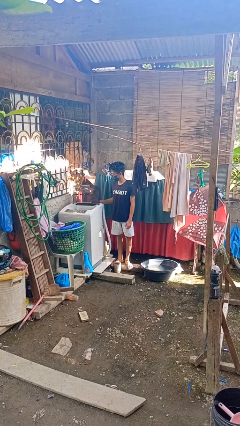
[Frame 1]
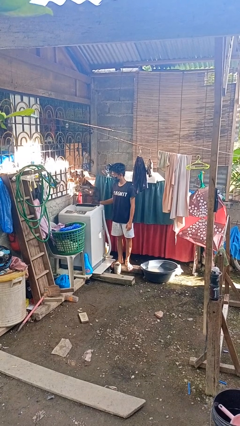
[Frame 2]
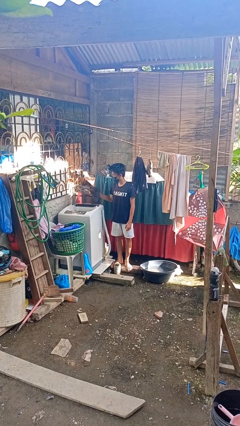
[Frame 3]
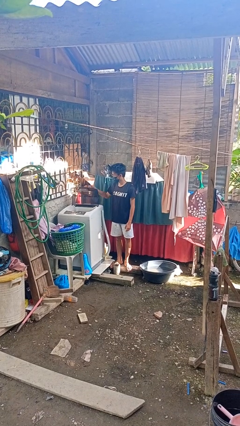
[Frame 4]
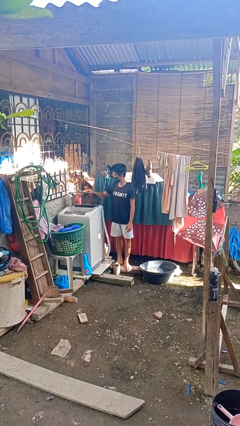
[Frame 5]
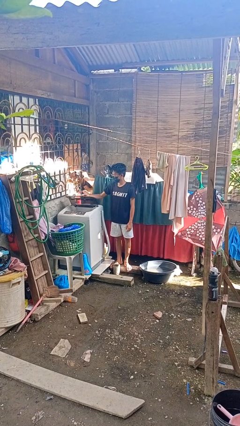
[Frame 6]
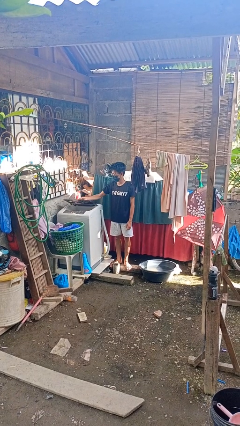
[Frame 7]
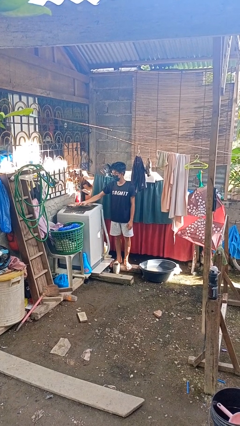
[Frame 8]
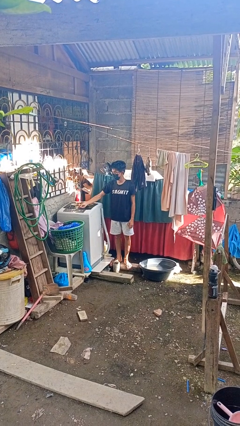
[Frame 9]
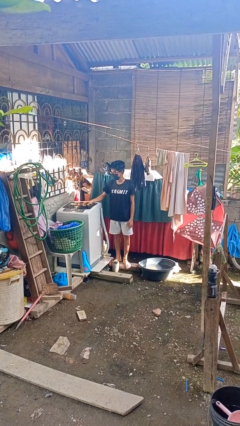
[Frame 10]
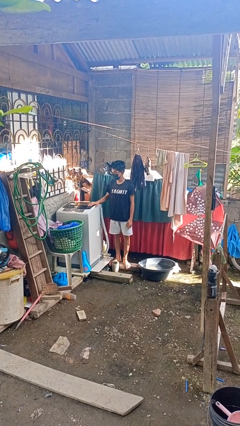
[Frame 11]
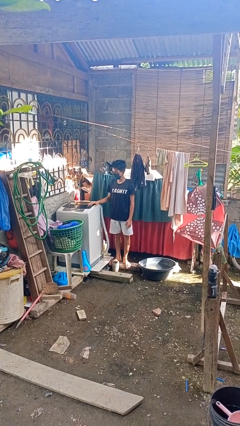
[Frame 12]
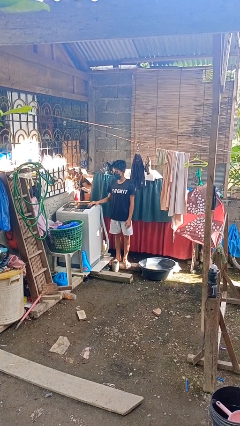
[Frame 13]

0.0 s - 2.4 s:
person closes clothes washer

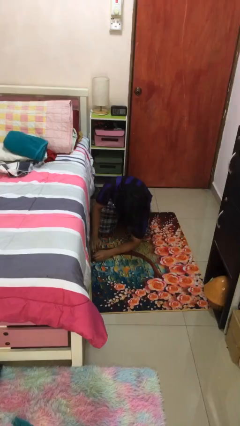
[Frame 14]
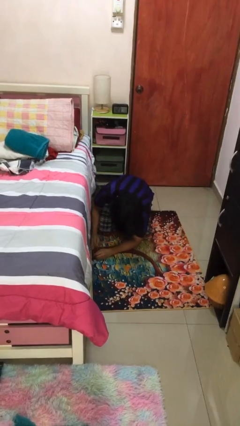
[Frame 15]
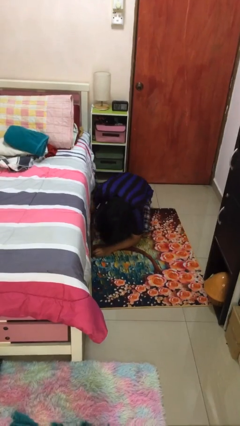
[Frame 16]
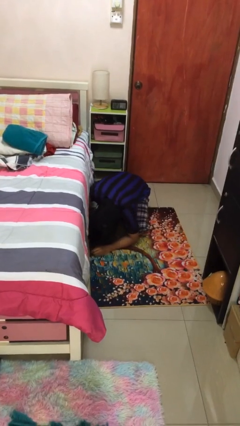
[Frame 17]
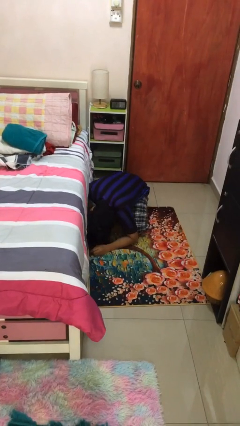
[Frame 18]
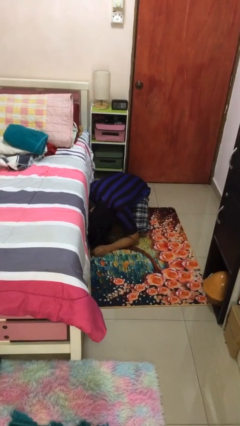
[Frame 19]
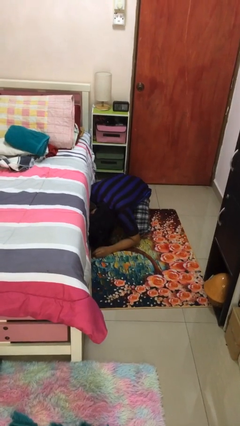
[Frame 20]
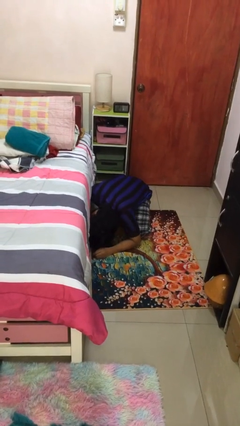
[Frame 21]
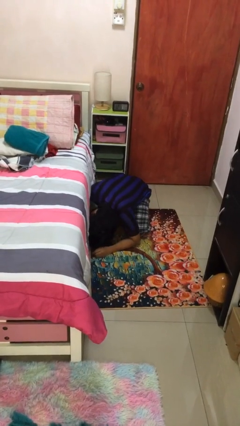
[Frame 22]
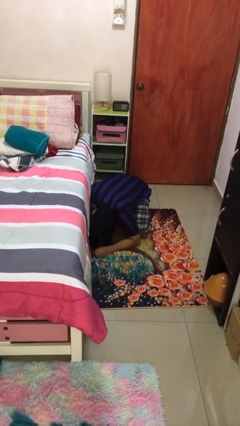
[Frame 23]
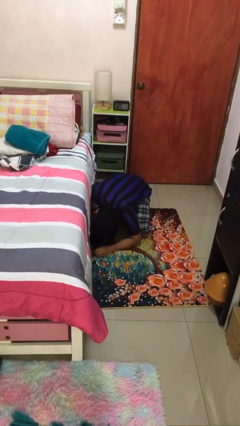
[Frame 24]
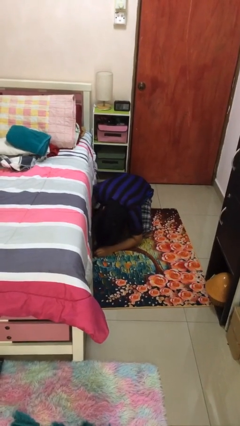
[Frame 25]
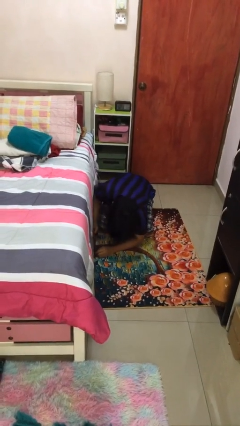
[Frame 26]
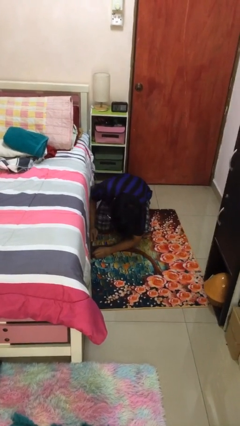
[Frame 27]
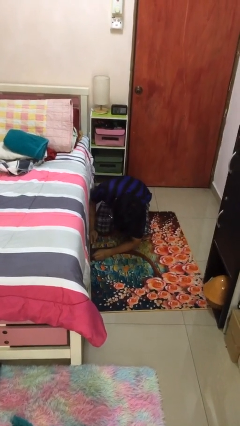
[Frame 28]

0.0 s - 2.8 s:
person searches under bed

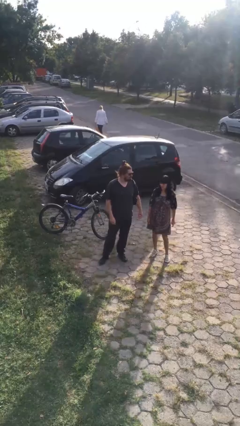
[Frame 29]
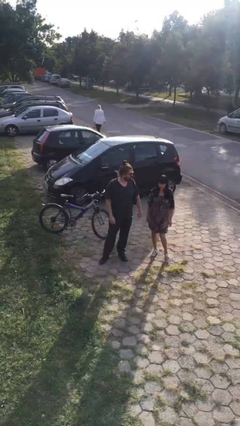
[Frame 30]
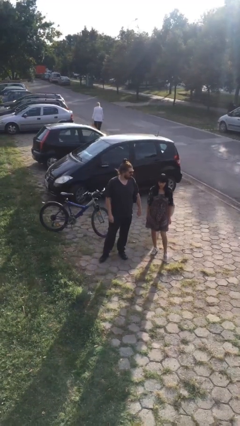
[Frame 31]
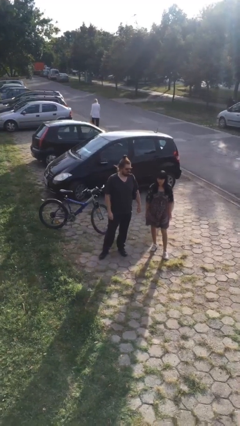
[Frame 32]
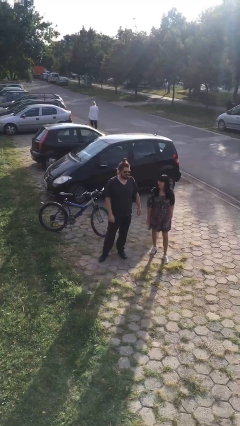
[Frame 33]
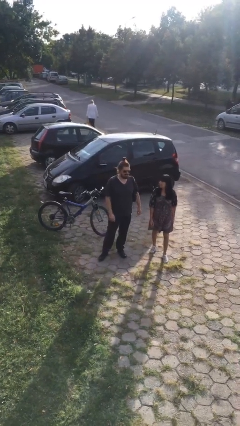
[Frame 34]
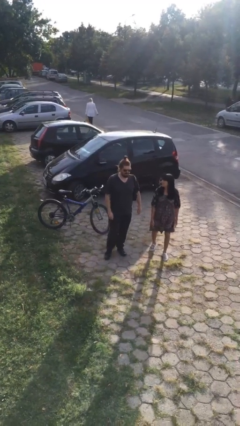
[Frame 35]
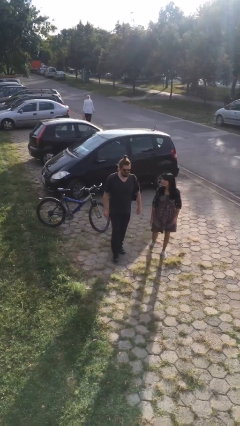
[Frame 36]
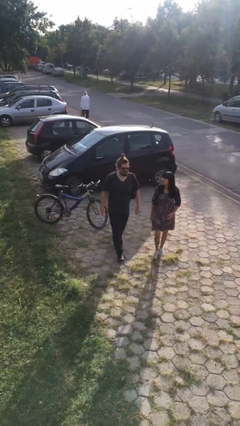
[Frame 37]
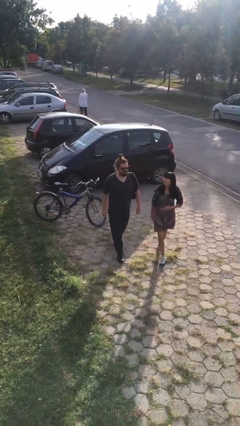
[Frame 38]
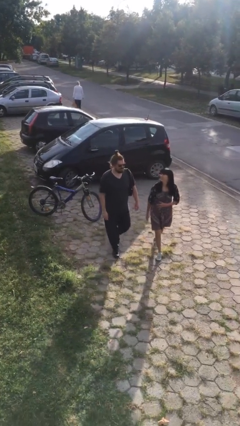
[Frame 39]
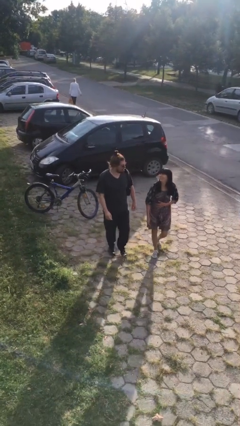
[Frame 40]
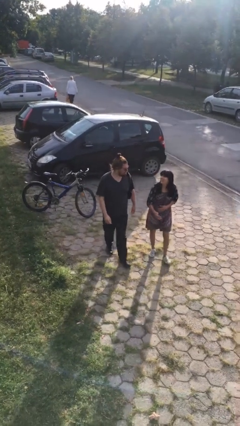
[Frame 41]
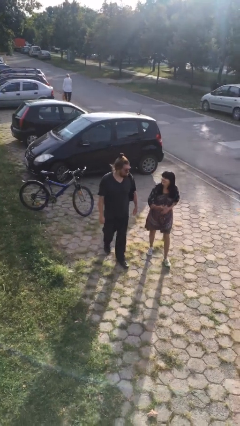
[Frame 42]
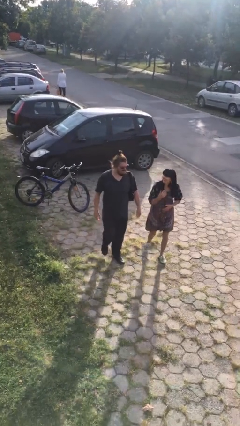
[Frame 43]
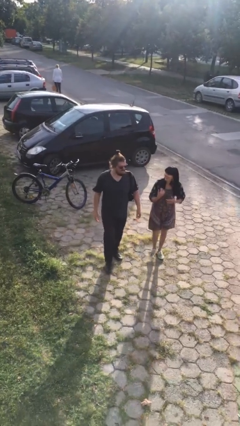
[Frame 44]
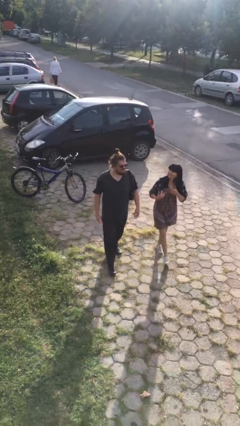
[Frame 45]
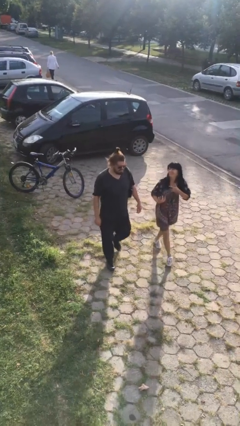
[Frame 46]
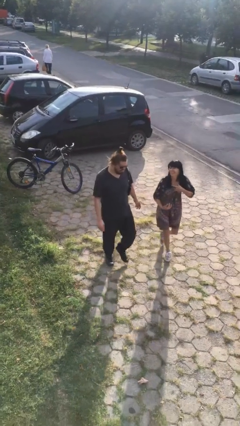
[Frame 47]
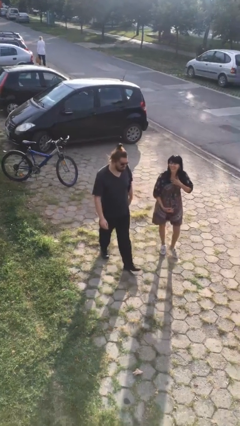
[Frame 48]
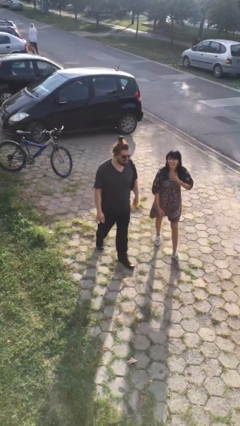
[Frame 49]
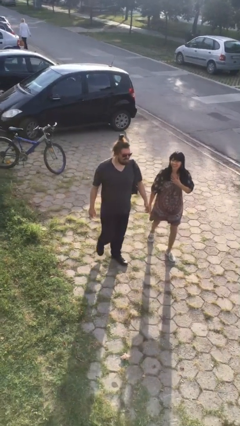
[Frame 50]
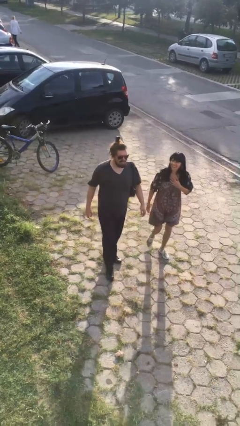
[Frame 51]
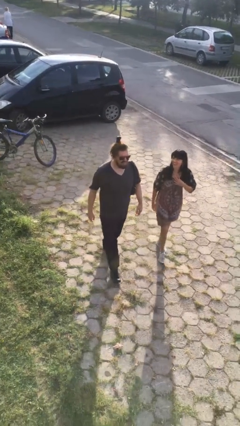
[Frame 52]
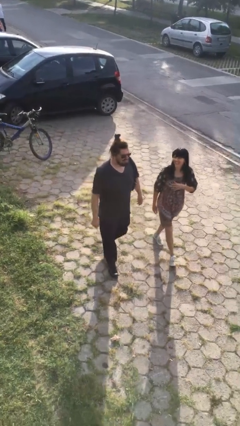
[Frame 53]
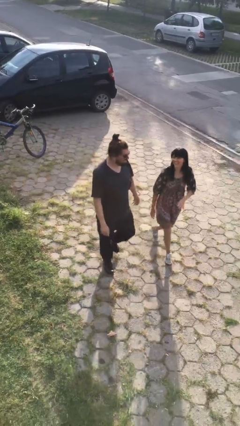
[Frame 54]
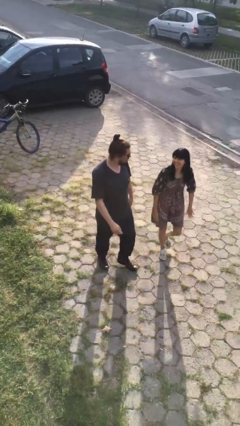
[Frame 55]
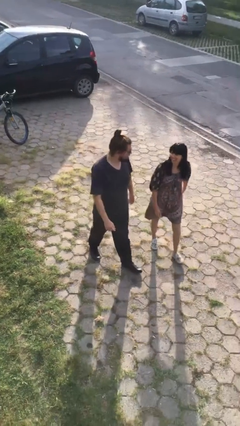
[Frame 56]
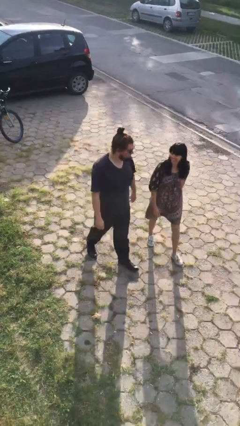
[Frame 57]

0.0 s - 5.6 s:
person talks to person

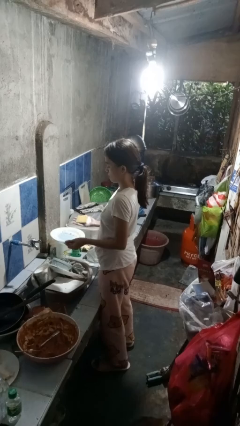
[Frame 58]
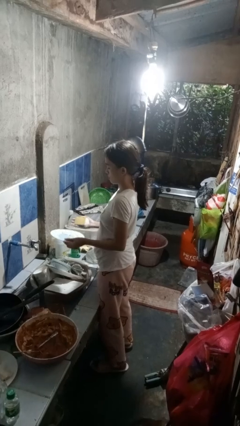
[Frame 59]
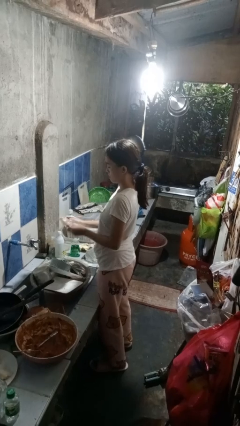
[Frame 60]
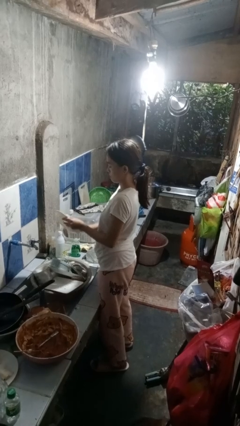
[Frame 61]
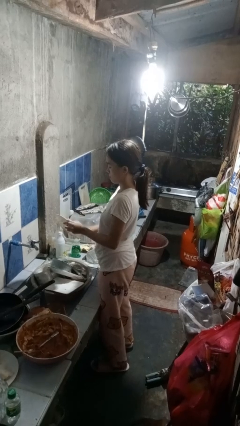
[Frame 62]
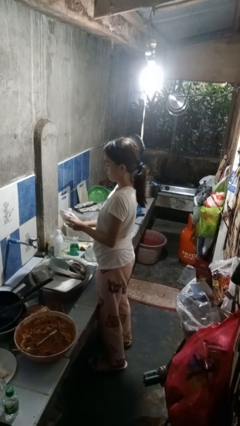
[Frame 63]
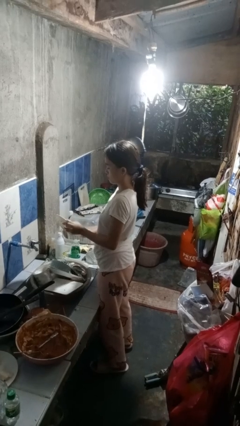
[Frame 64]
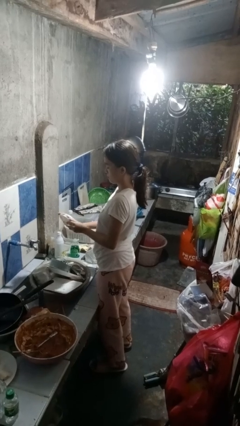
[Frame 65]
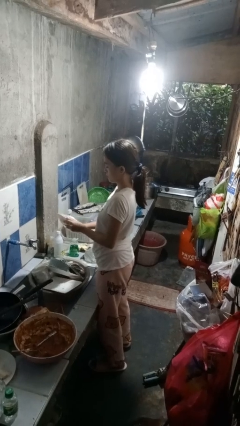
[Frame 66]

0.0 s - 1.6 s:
person washes dish

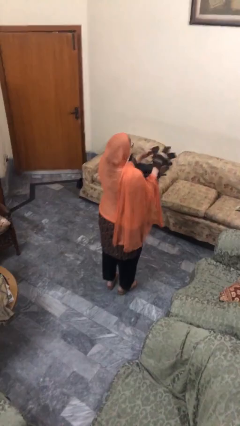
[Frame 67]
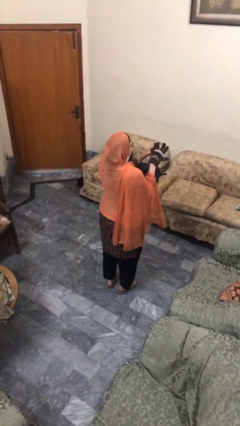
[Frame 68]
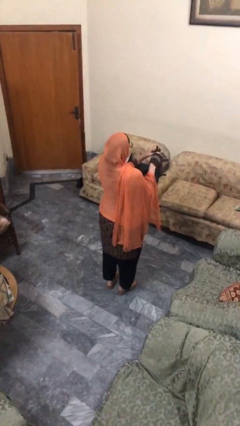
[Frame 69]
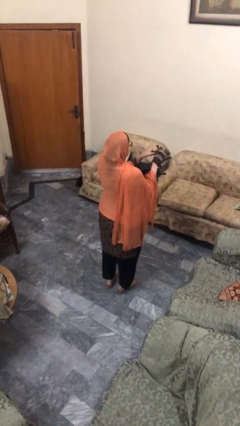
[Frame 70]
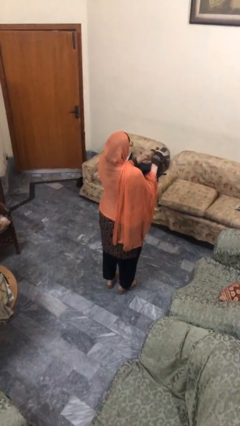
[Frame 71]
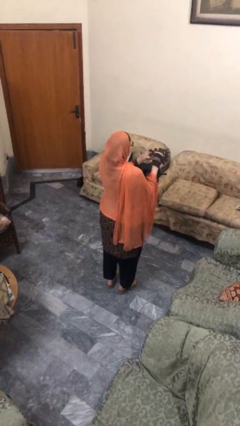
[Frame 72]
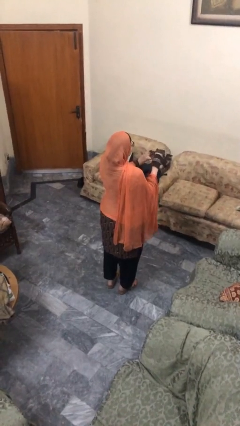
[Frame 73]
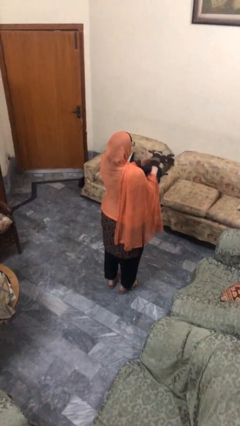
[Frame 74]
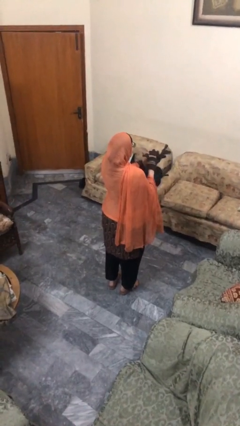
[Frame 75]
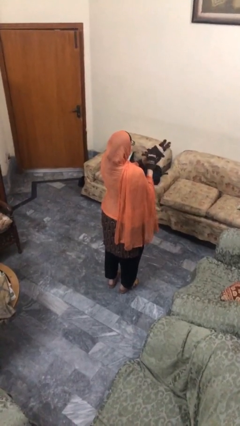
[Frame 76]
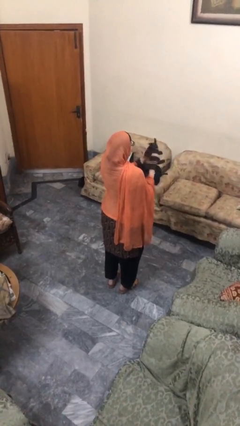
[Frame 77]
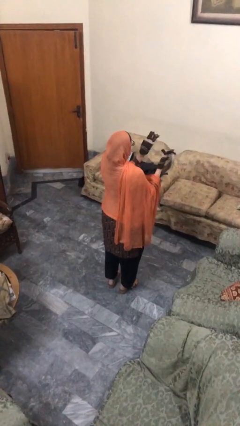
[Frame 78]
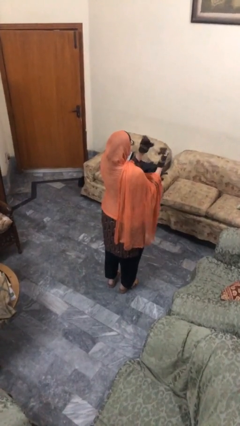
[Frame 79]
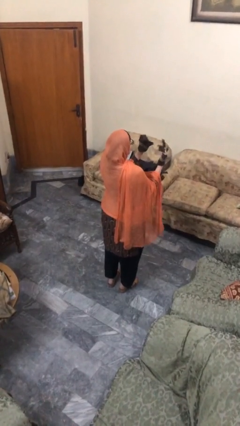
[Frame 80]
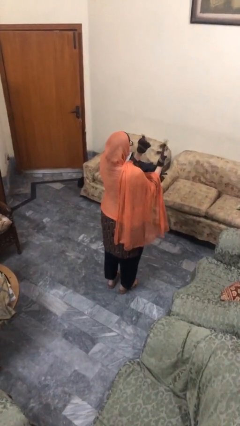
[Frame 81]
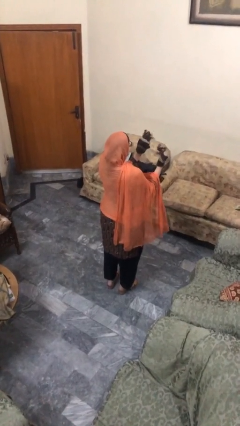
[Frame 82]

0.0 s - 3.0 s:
person puts on gloves

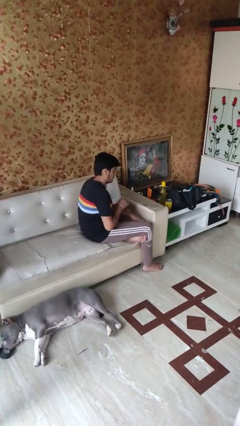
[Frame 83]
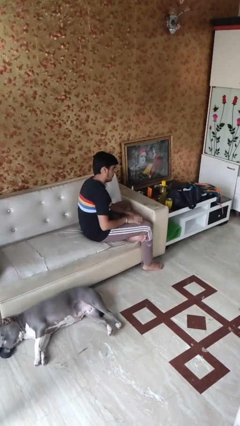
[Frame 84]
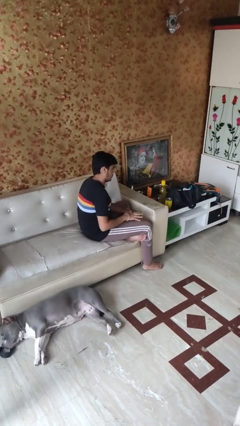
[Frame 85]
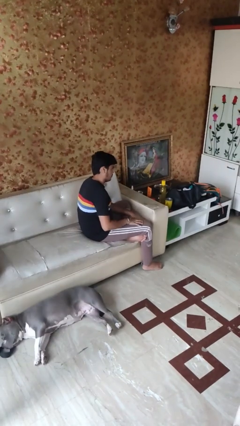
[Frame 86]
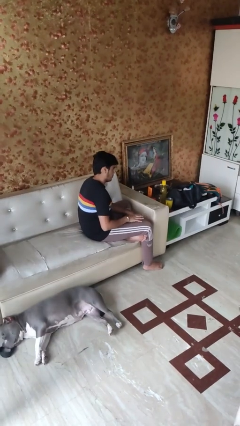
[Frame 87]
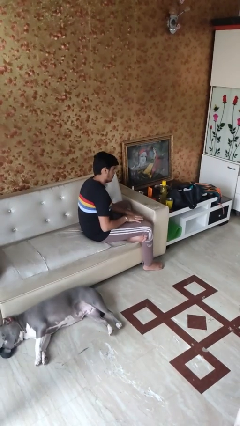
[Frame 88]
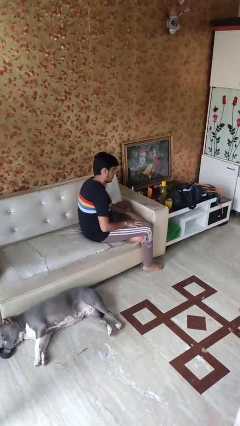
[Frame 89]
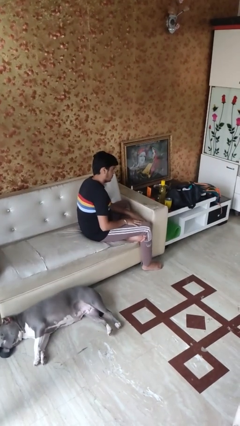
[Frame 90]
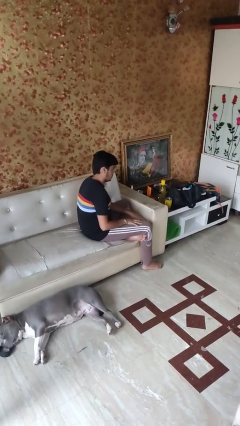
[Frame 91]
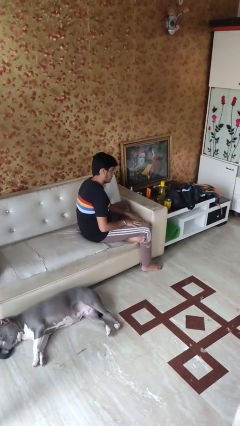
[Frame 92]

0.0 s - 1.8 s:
person slaps hands on thighs

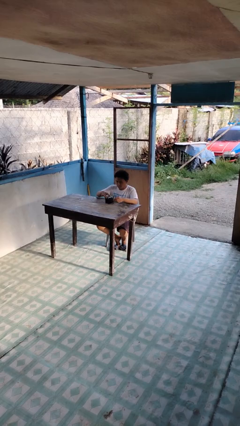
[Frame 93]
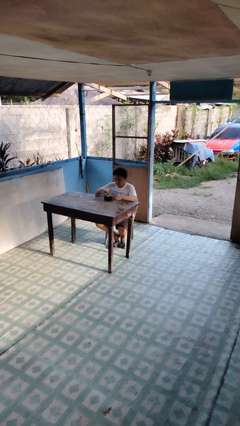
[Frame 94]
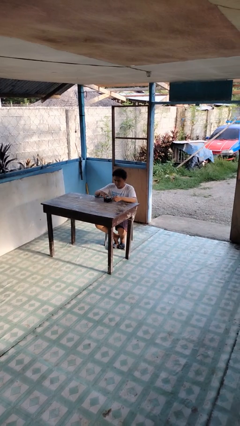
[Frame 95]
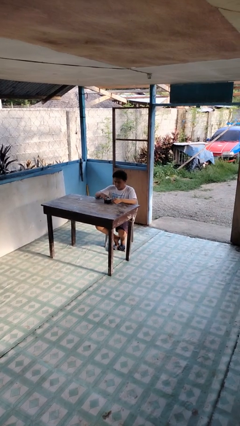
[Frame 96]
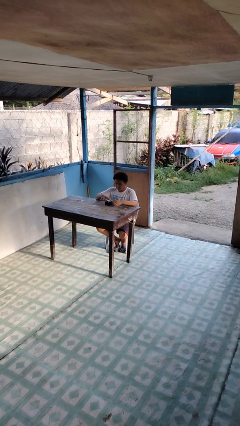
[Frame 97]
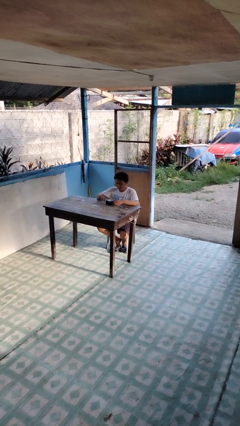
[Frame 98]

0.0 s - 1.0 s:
person closes jewelry box
